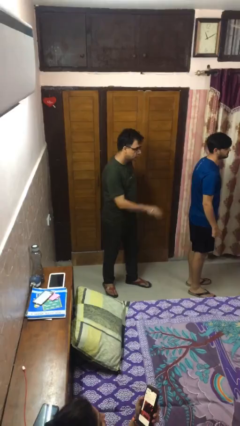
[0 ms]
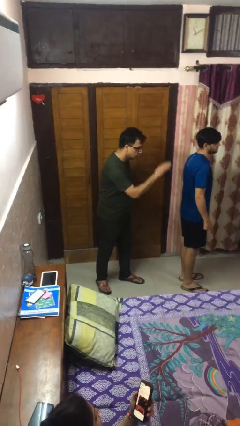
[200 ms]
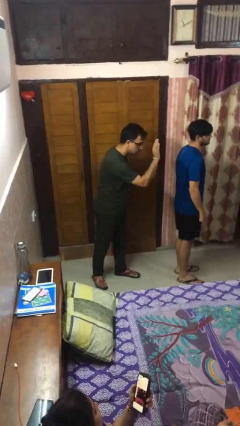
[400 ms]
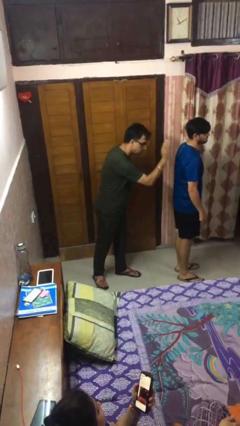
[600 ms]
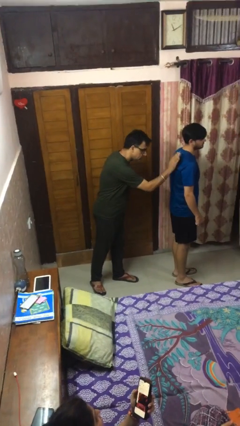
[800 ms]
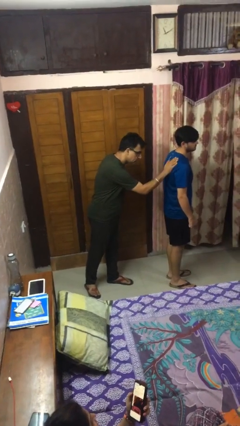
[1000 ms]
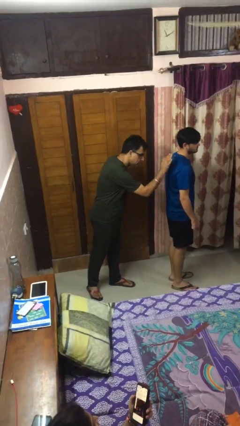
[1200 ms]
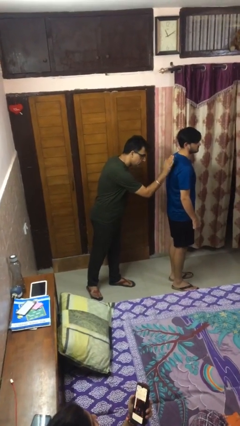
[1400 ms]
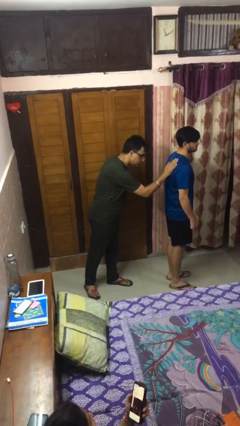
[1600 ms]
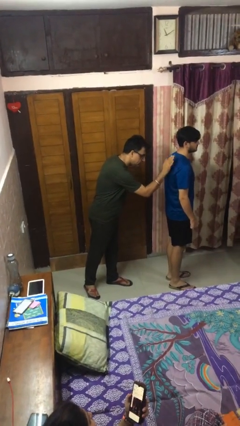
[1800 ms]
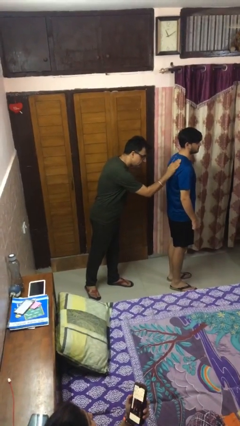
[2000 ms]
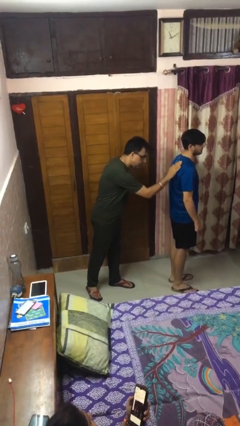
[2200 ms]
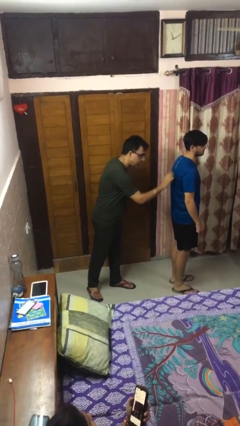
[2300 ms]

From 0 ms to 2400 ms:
person touches back of person

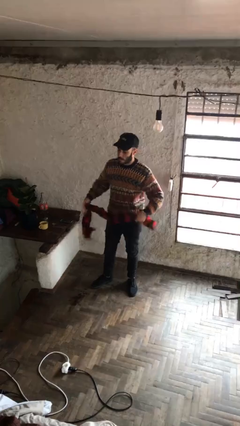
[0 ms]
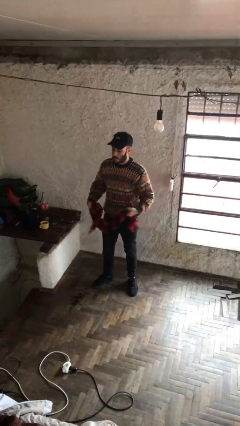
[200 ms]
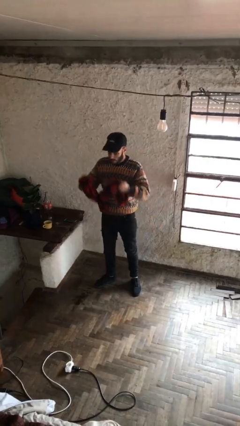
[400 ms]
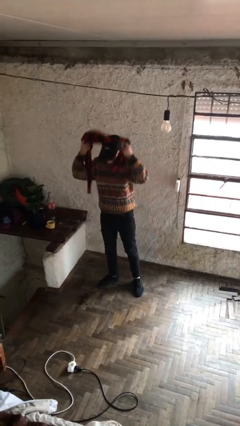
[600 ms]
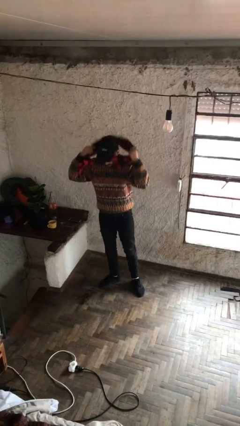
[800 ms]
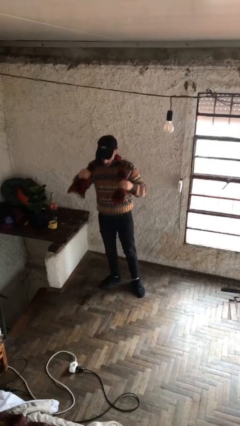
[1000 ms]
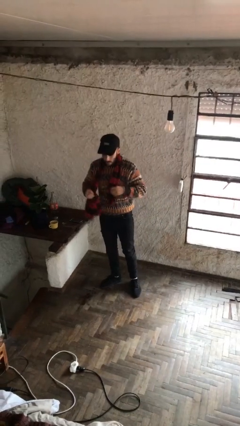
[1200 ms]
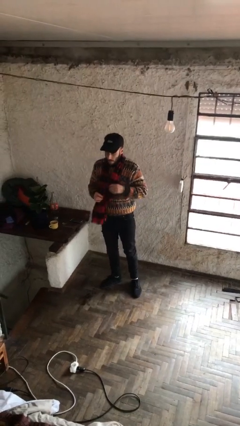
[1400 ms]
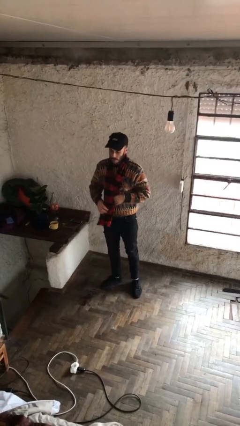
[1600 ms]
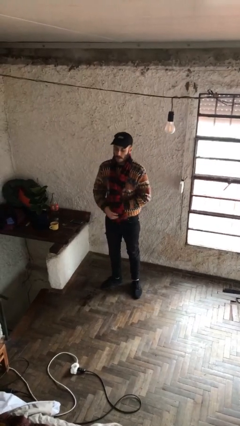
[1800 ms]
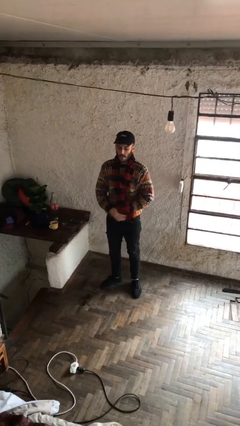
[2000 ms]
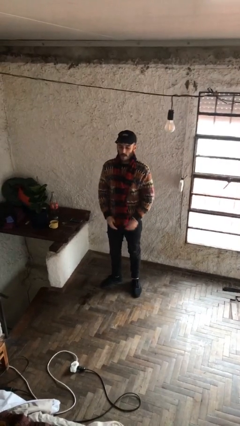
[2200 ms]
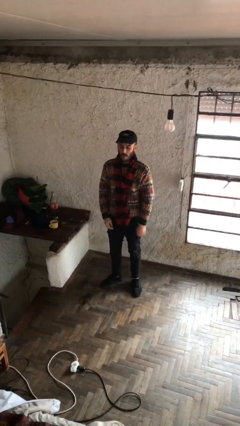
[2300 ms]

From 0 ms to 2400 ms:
person puts on scarf

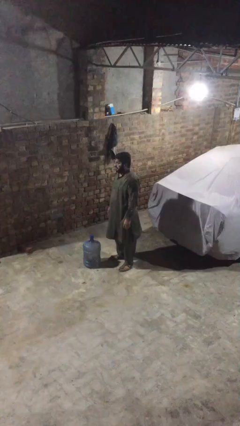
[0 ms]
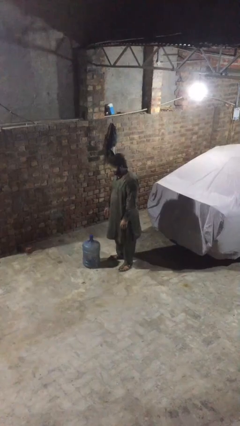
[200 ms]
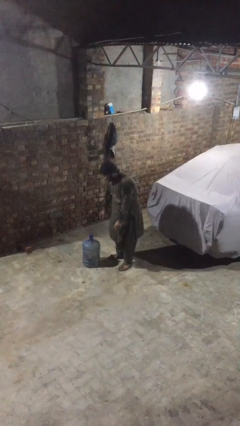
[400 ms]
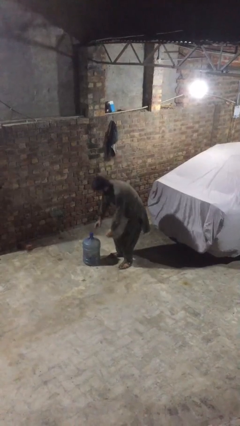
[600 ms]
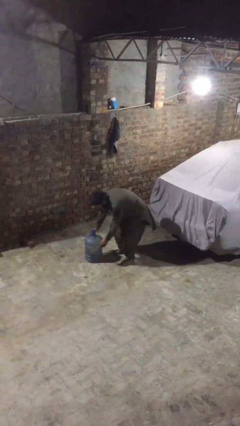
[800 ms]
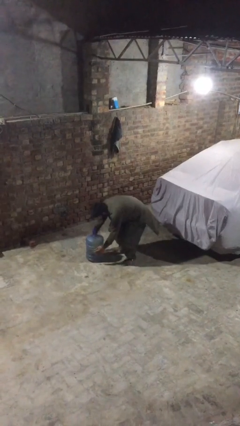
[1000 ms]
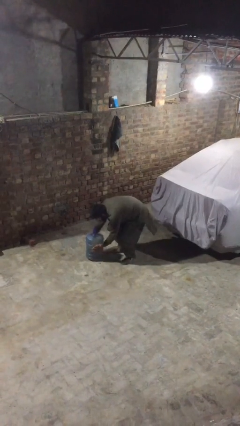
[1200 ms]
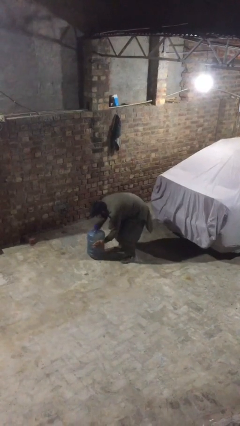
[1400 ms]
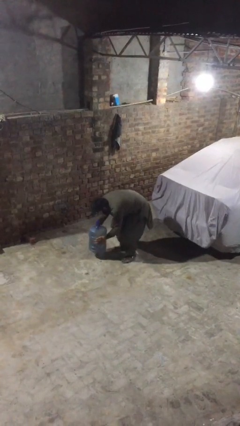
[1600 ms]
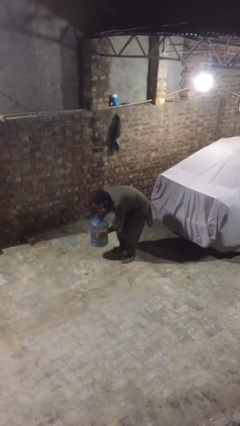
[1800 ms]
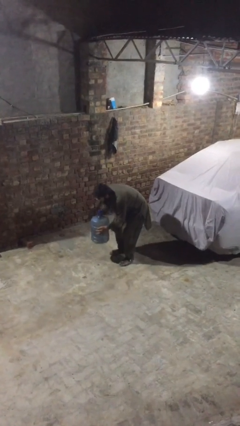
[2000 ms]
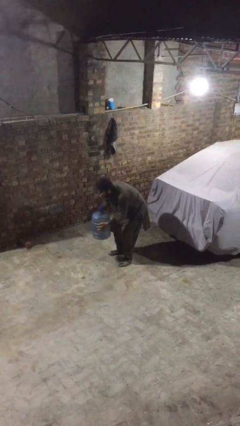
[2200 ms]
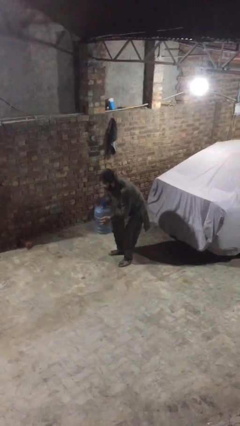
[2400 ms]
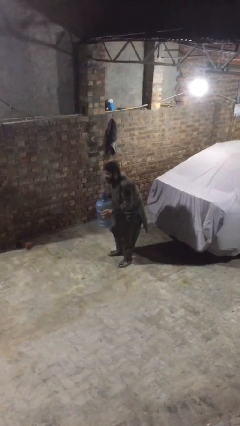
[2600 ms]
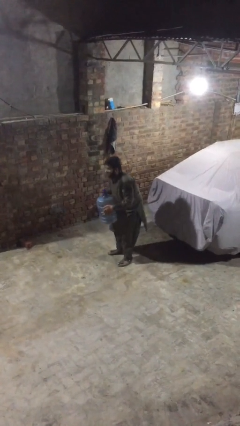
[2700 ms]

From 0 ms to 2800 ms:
person picks up object from floor

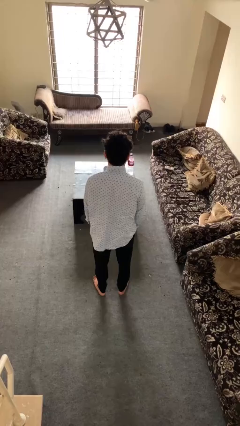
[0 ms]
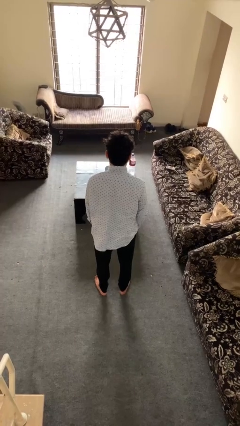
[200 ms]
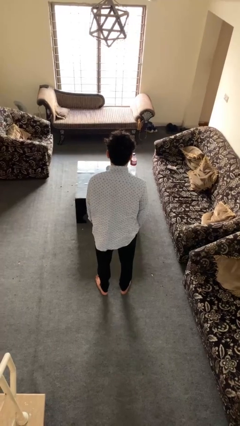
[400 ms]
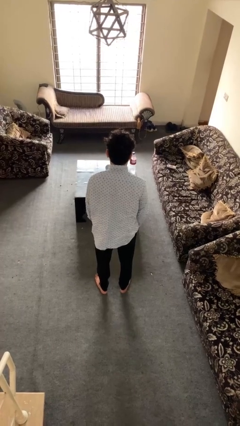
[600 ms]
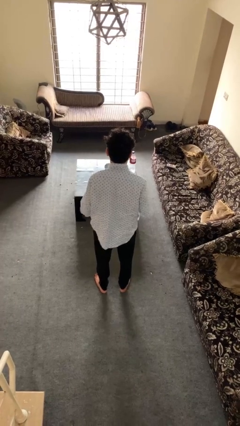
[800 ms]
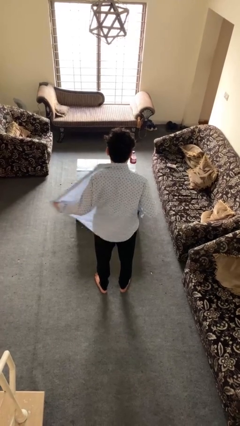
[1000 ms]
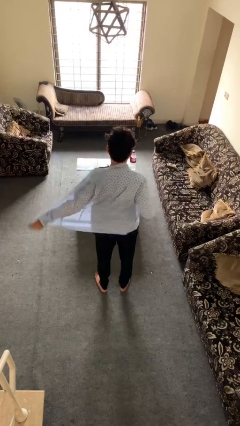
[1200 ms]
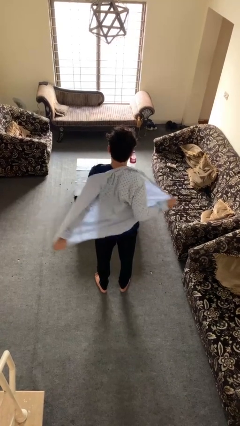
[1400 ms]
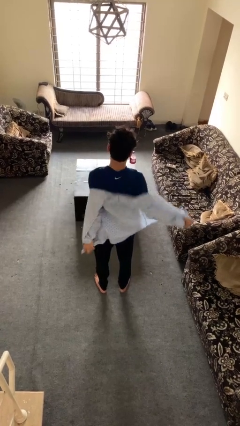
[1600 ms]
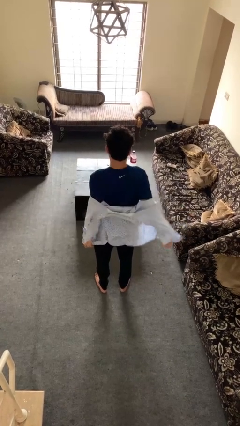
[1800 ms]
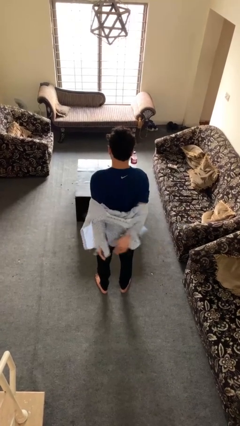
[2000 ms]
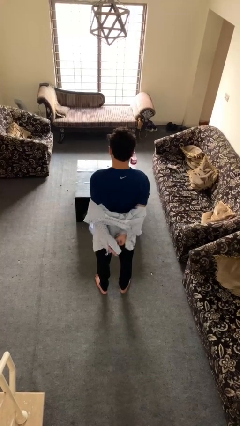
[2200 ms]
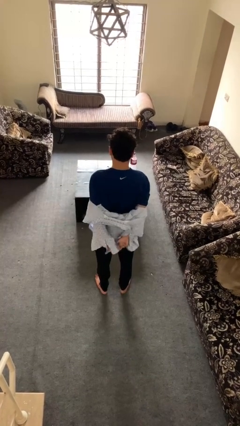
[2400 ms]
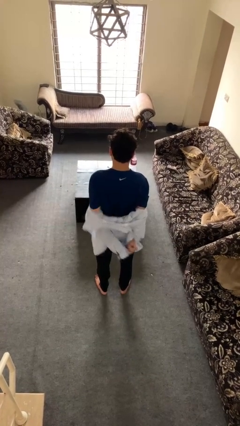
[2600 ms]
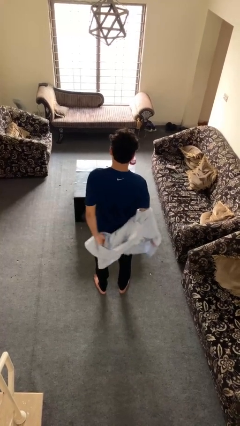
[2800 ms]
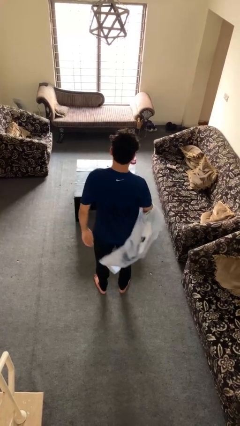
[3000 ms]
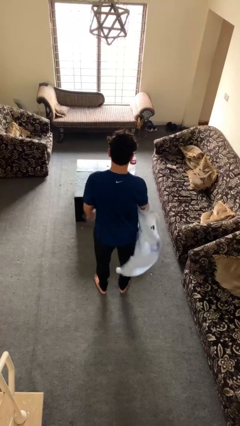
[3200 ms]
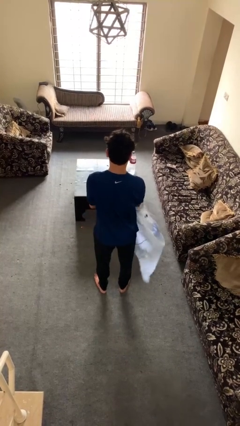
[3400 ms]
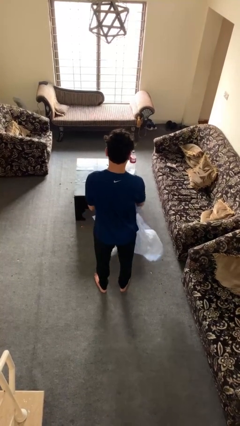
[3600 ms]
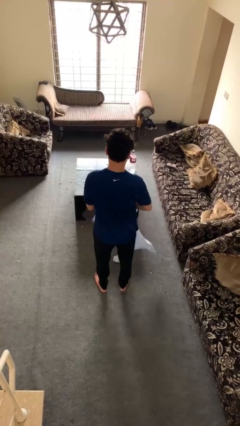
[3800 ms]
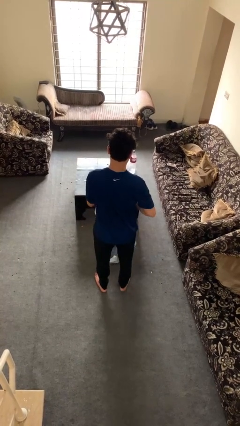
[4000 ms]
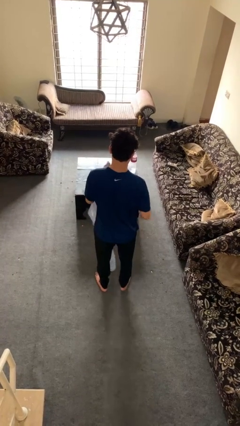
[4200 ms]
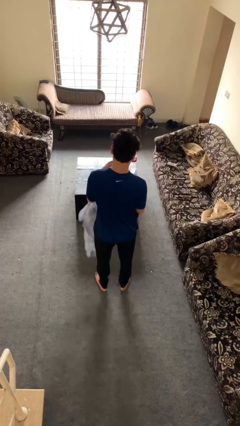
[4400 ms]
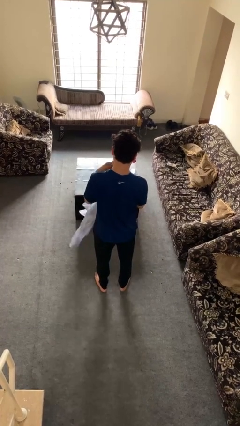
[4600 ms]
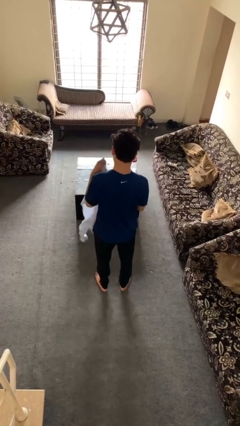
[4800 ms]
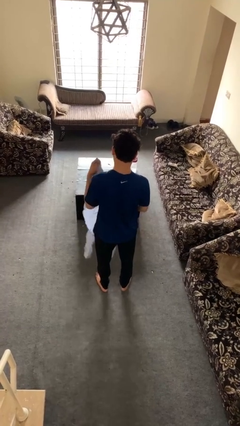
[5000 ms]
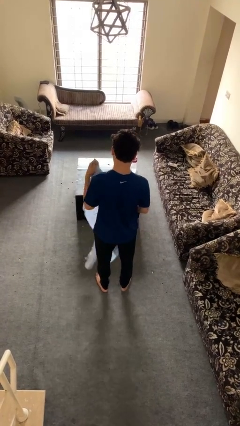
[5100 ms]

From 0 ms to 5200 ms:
person takes off shirt

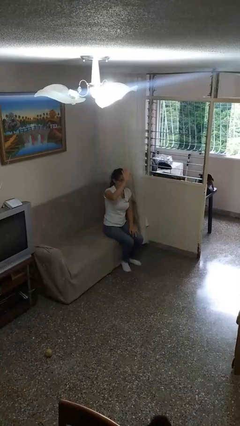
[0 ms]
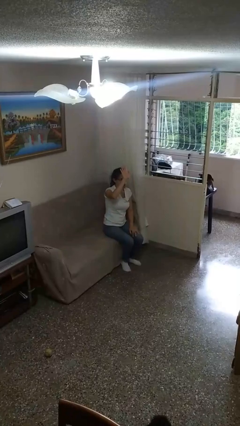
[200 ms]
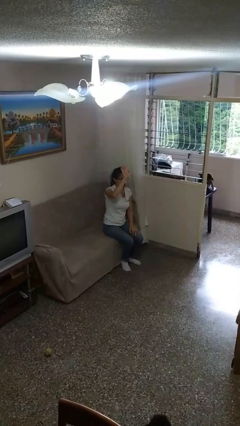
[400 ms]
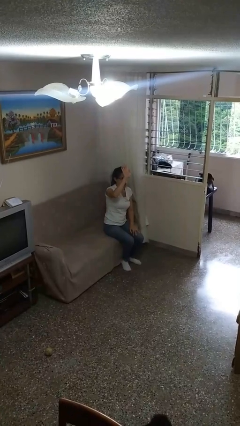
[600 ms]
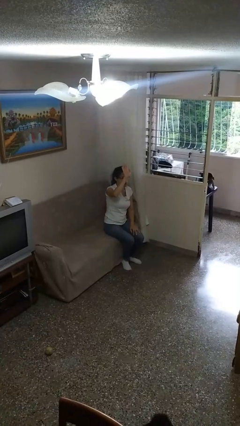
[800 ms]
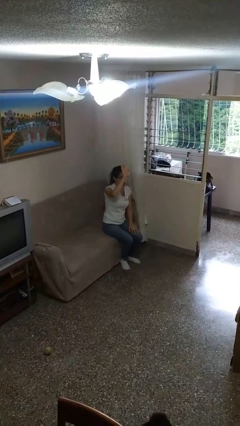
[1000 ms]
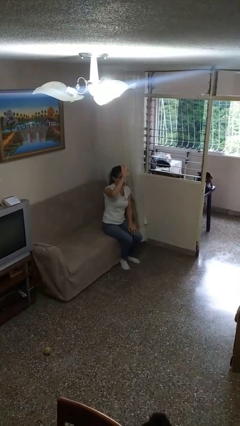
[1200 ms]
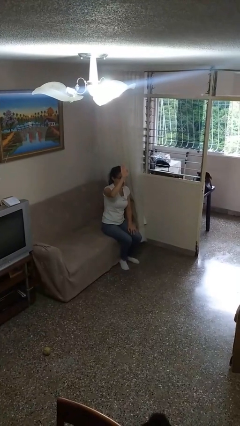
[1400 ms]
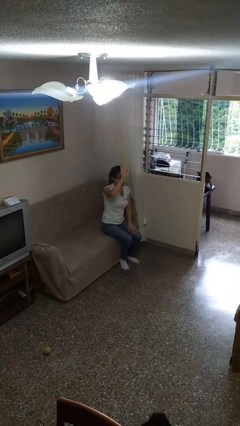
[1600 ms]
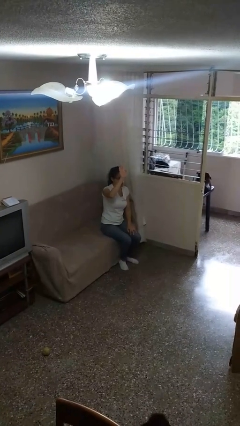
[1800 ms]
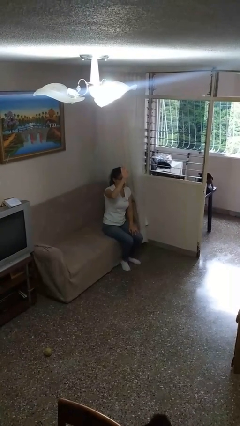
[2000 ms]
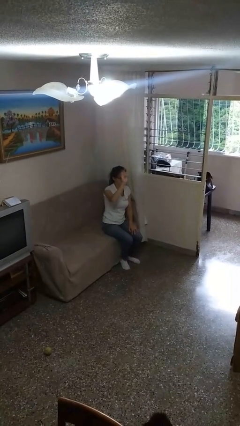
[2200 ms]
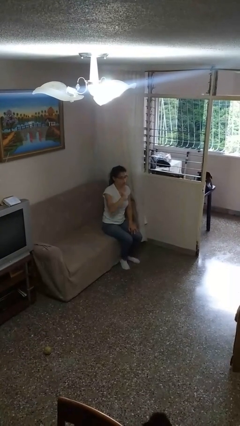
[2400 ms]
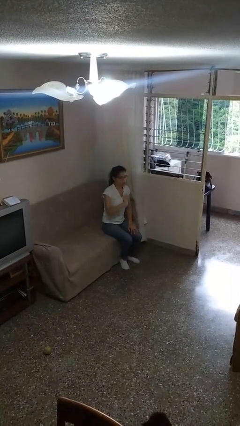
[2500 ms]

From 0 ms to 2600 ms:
person gestures raise hand

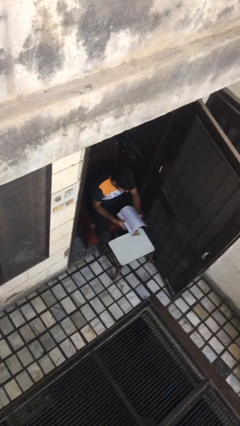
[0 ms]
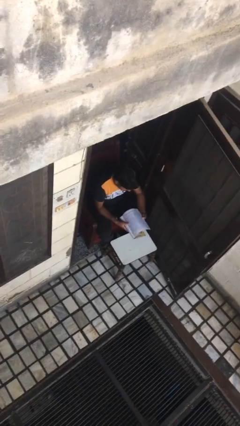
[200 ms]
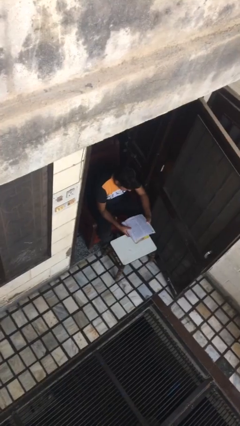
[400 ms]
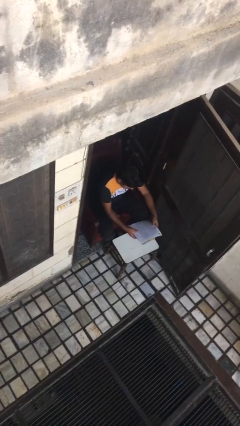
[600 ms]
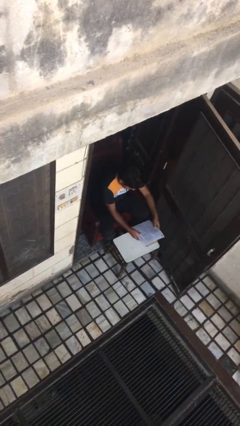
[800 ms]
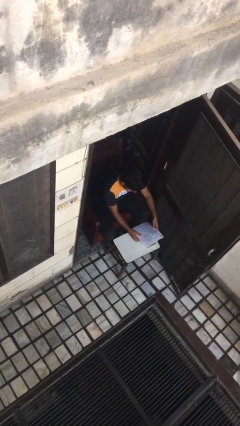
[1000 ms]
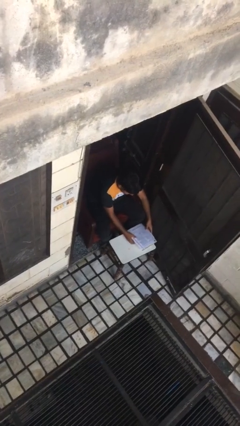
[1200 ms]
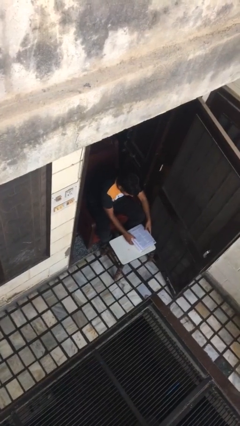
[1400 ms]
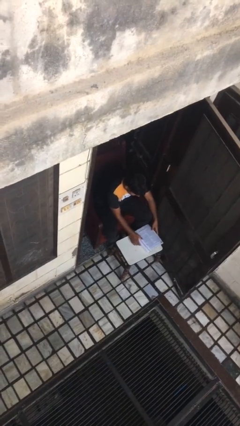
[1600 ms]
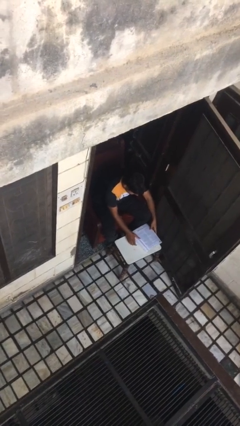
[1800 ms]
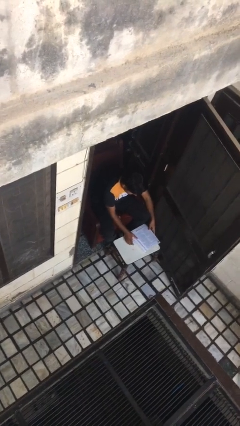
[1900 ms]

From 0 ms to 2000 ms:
person puts down object on table
